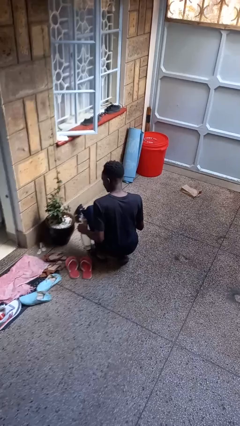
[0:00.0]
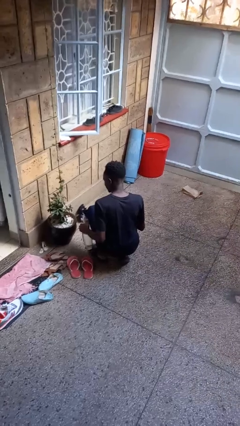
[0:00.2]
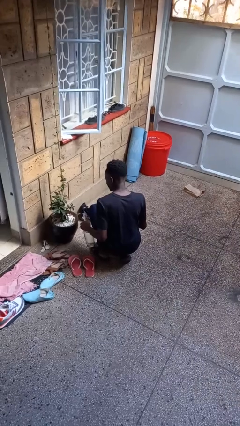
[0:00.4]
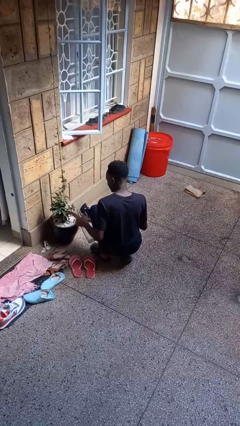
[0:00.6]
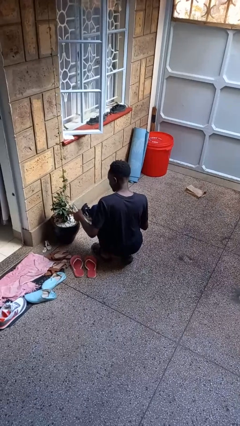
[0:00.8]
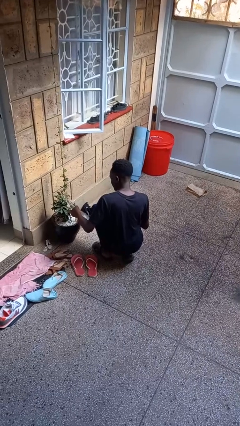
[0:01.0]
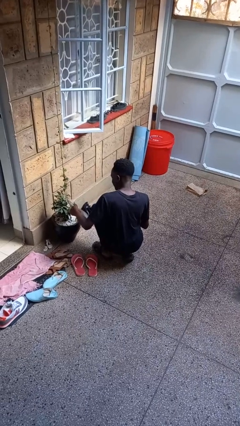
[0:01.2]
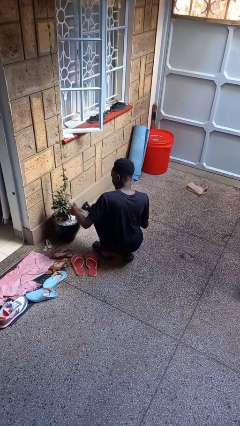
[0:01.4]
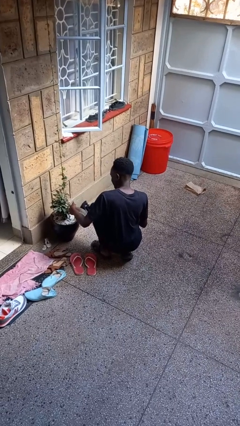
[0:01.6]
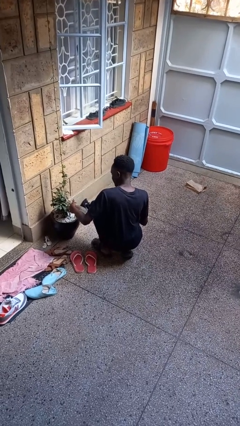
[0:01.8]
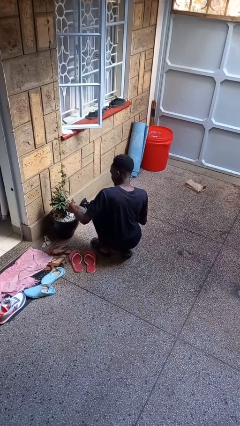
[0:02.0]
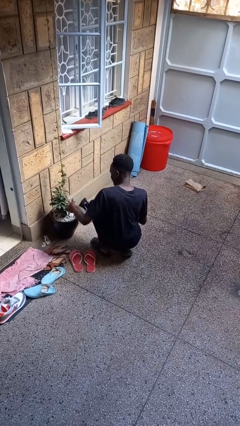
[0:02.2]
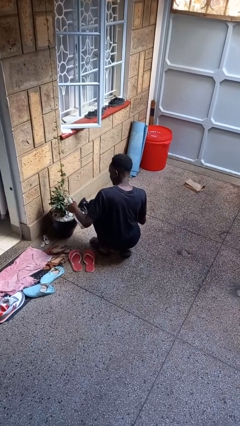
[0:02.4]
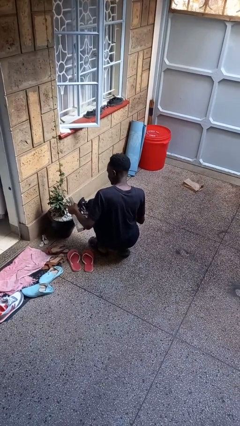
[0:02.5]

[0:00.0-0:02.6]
person waters houseplant

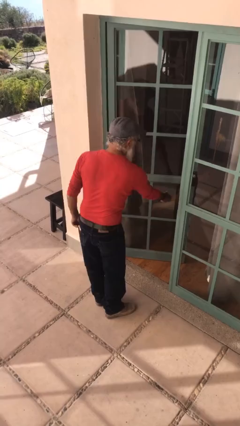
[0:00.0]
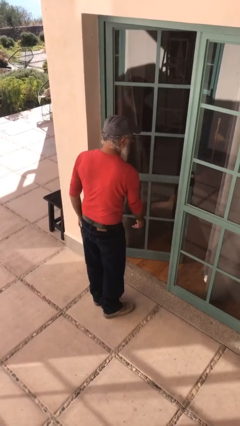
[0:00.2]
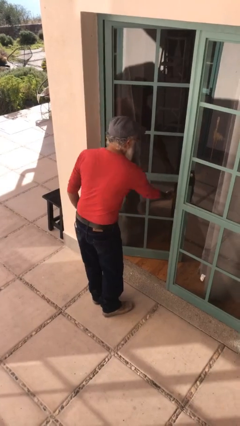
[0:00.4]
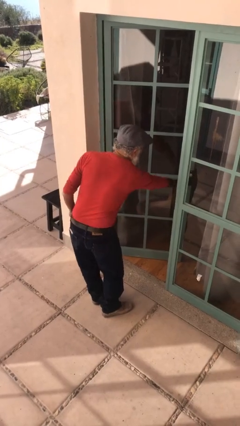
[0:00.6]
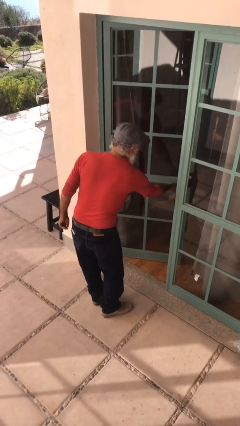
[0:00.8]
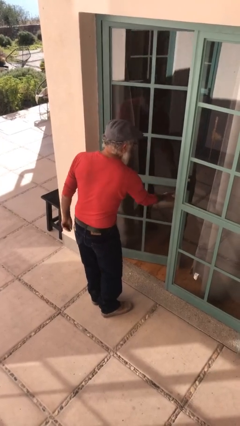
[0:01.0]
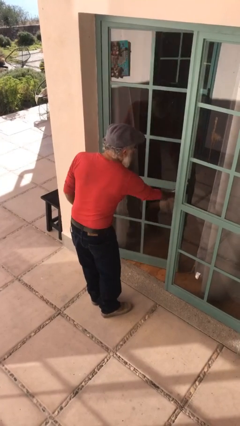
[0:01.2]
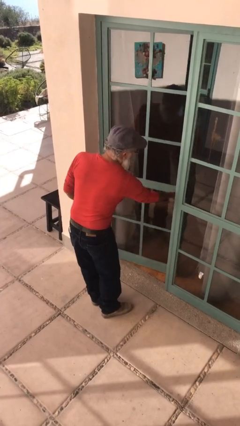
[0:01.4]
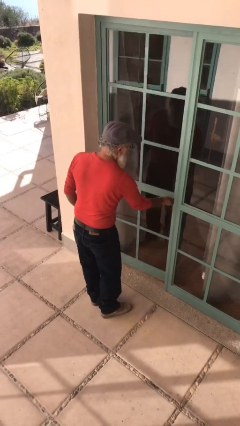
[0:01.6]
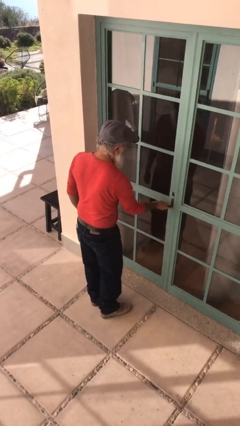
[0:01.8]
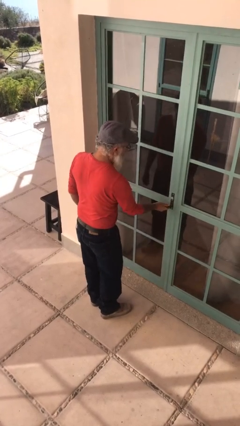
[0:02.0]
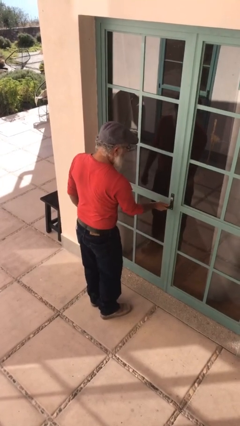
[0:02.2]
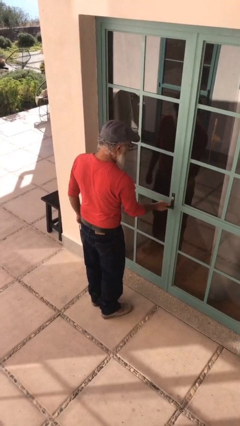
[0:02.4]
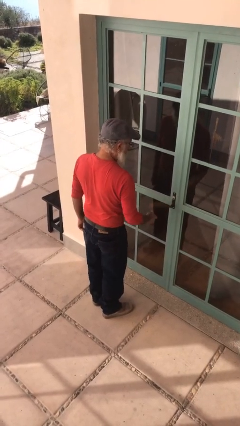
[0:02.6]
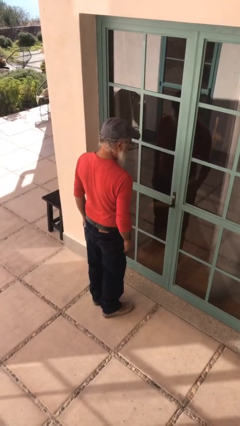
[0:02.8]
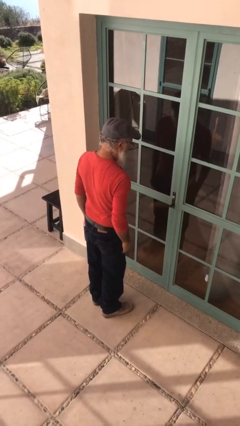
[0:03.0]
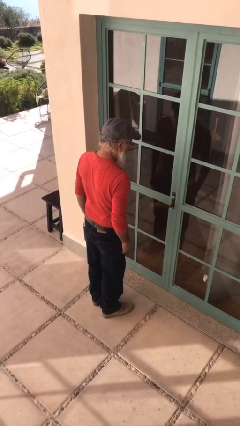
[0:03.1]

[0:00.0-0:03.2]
person closes facility door

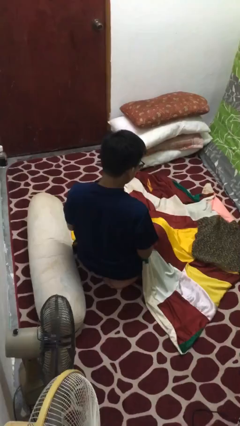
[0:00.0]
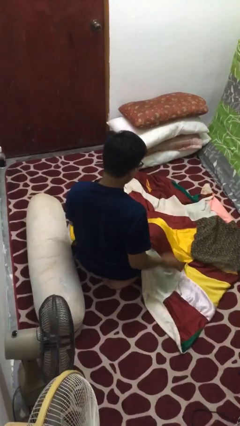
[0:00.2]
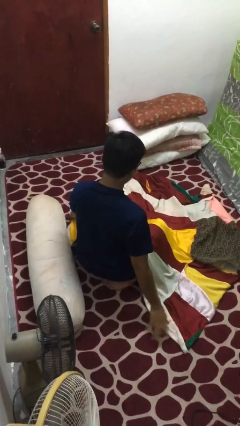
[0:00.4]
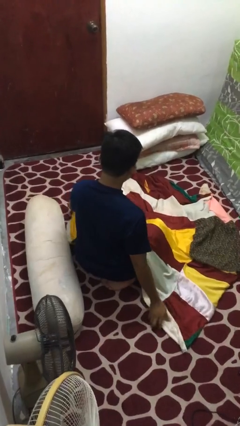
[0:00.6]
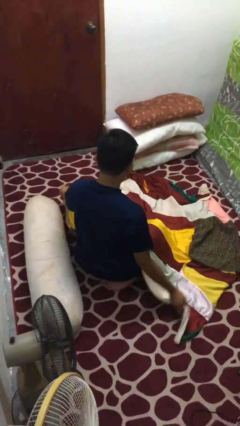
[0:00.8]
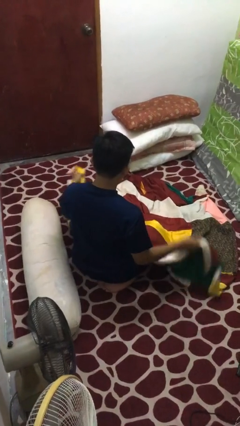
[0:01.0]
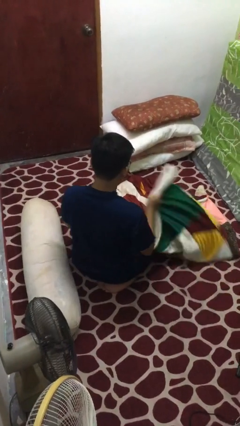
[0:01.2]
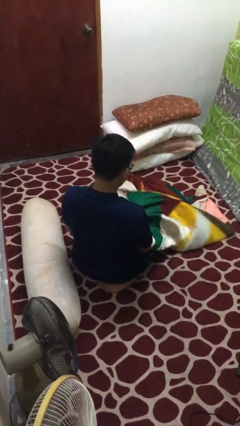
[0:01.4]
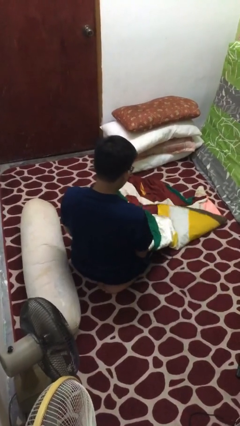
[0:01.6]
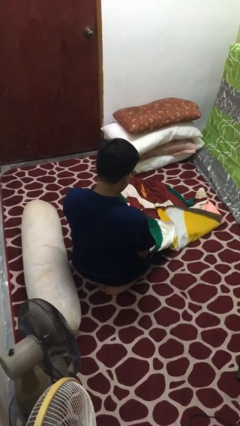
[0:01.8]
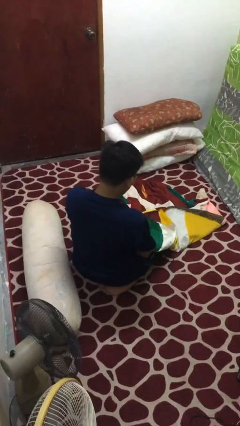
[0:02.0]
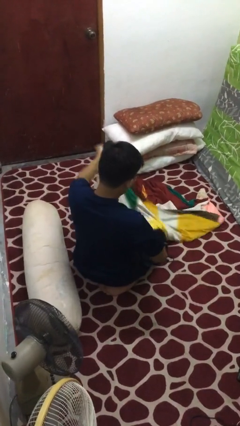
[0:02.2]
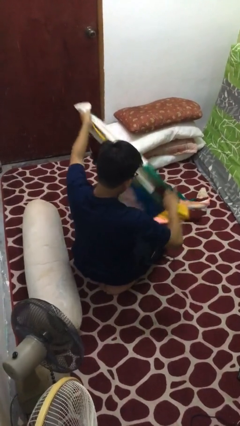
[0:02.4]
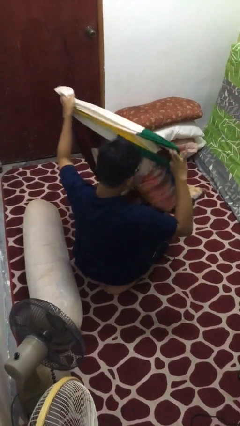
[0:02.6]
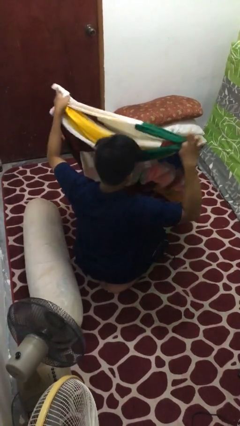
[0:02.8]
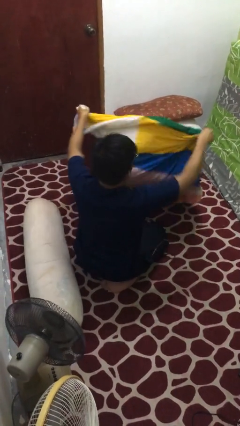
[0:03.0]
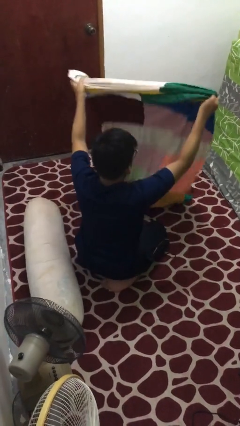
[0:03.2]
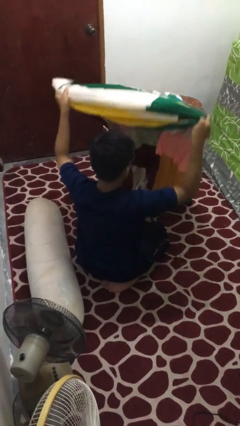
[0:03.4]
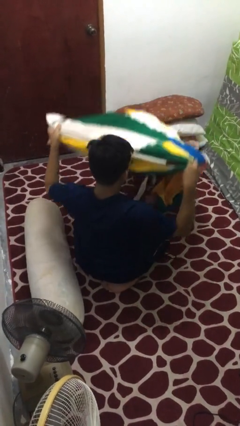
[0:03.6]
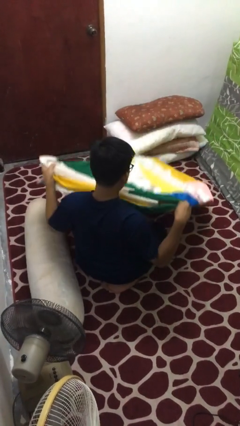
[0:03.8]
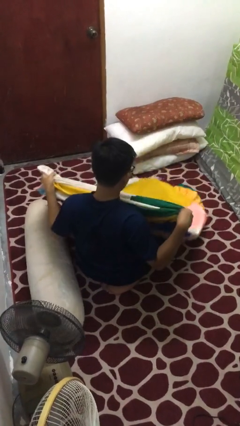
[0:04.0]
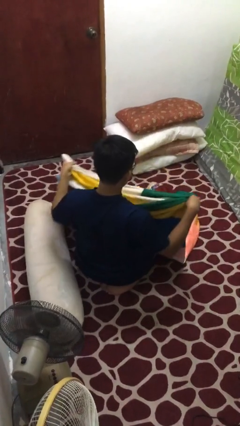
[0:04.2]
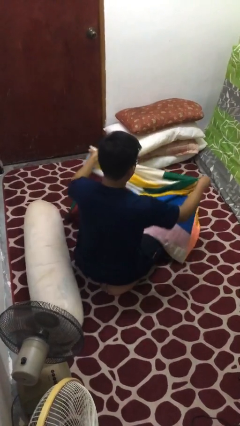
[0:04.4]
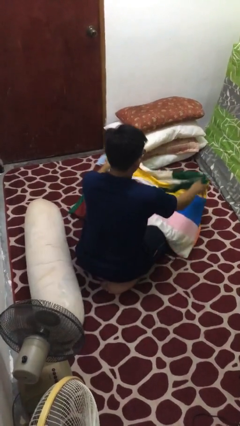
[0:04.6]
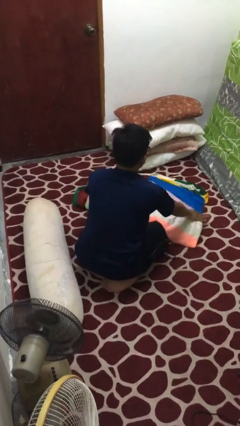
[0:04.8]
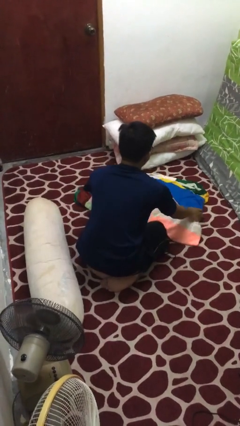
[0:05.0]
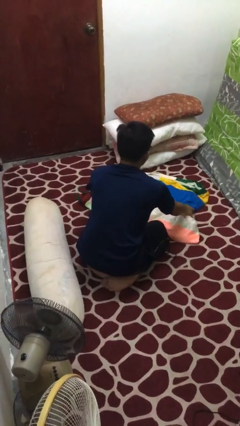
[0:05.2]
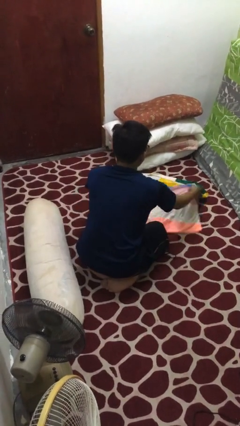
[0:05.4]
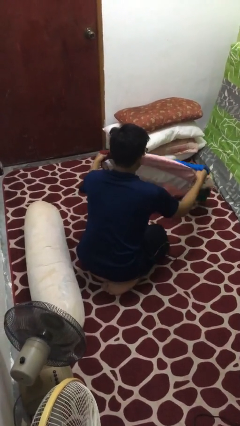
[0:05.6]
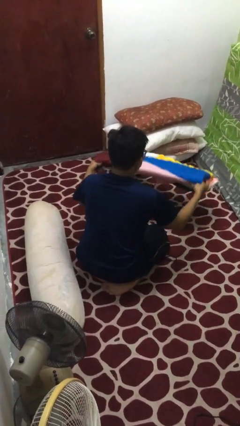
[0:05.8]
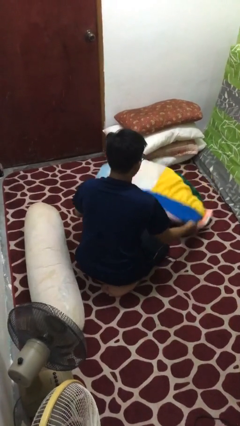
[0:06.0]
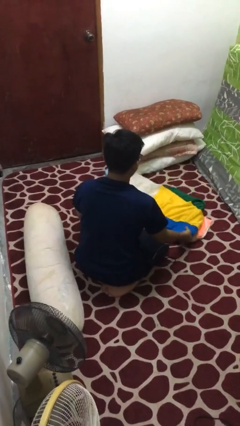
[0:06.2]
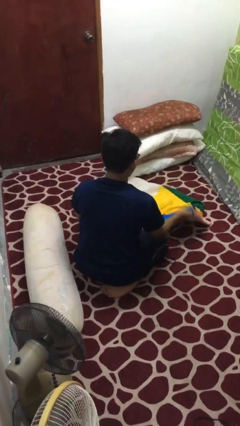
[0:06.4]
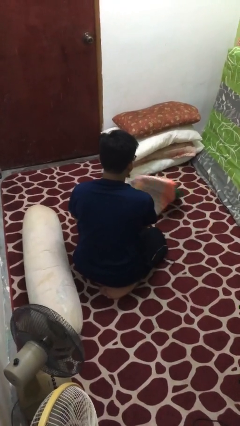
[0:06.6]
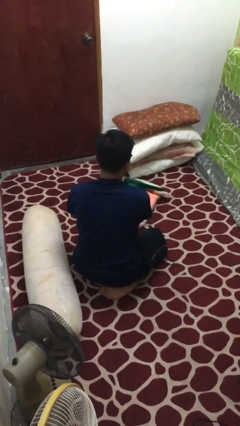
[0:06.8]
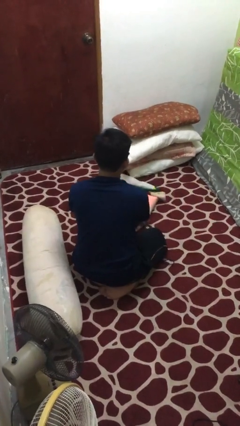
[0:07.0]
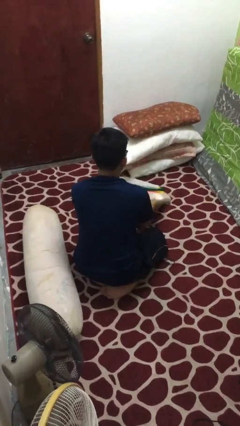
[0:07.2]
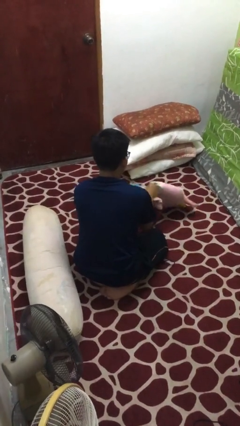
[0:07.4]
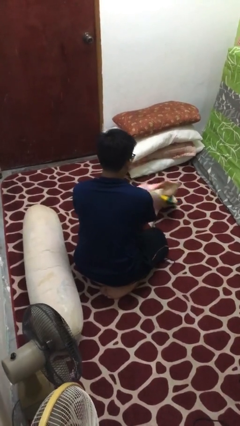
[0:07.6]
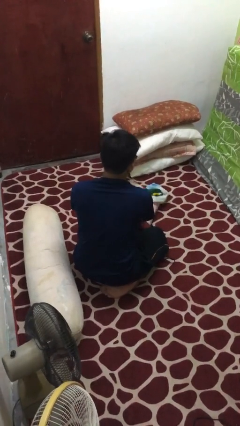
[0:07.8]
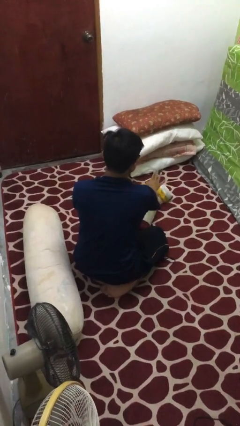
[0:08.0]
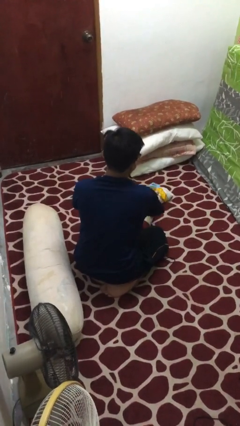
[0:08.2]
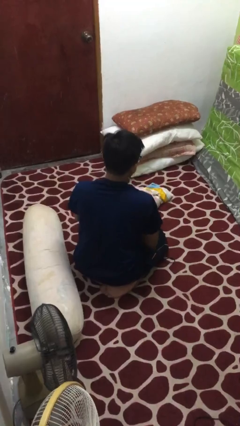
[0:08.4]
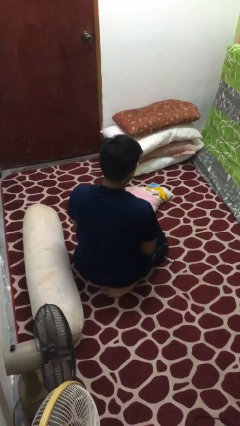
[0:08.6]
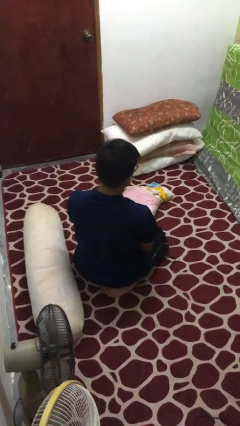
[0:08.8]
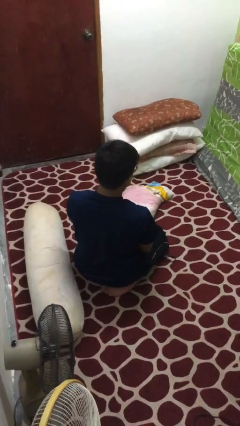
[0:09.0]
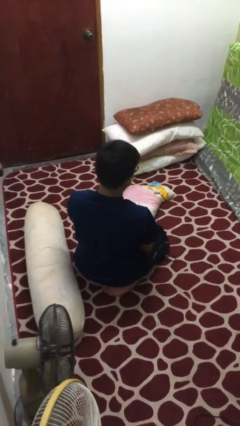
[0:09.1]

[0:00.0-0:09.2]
person folds blanket

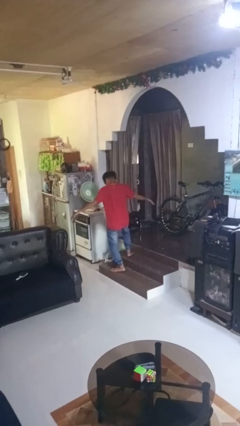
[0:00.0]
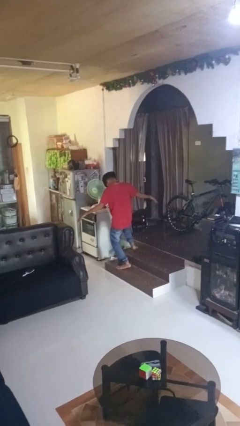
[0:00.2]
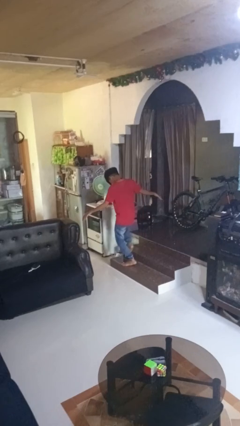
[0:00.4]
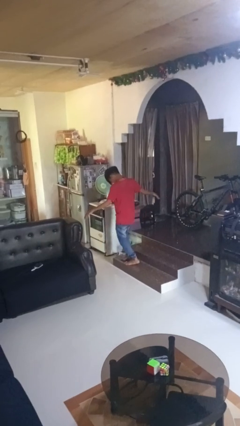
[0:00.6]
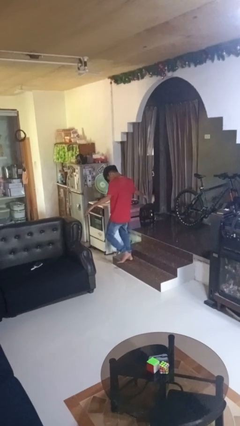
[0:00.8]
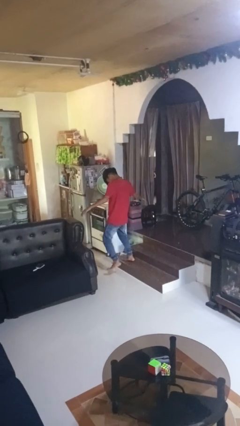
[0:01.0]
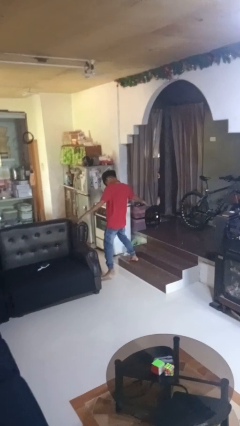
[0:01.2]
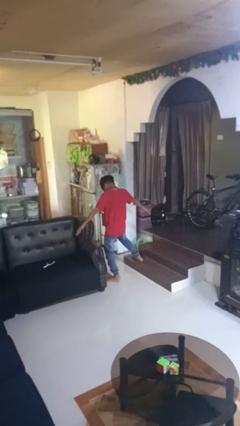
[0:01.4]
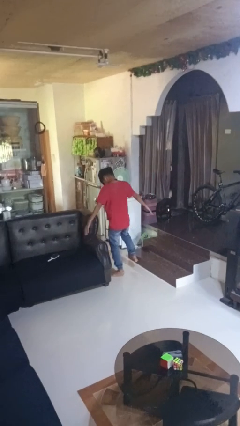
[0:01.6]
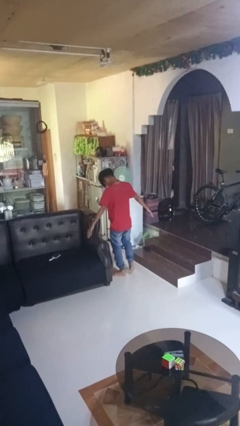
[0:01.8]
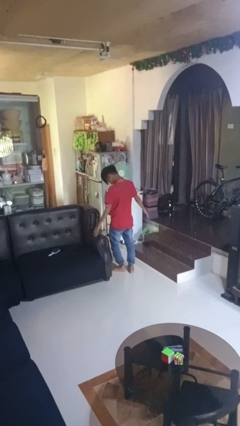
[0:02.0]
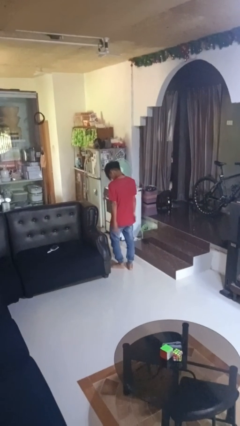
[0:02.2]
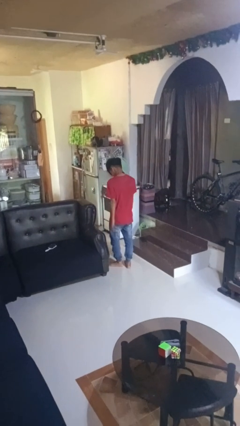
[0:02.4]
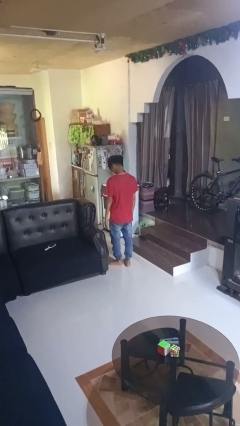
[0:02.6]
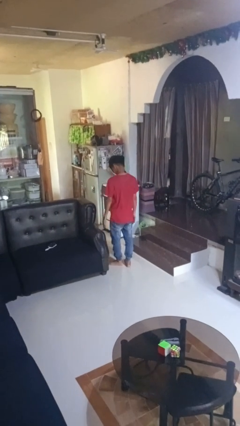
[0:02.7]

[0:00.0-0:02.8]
person walks tiptoe
